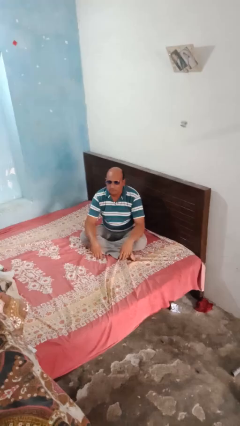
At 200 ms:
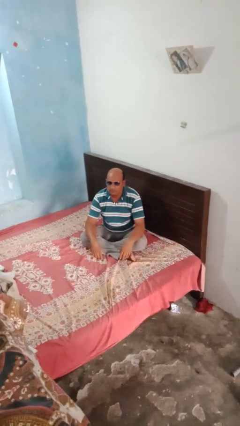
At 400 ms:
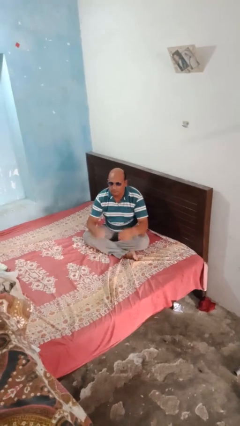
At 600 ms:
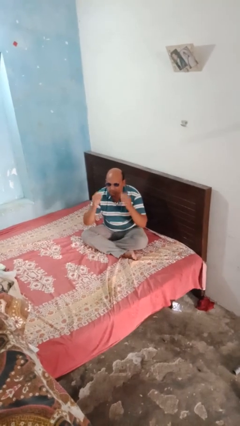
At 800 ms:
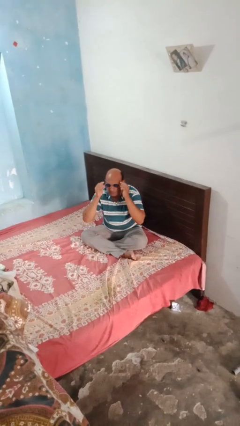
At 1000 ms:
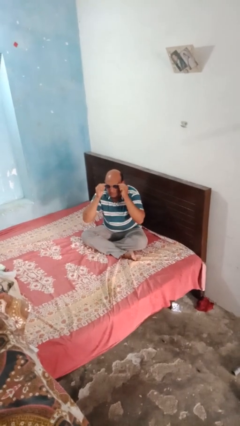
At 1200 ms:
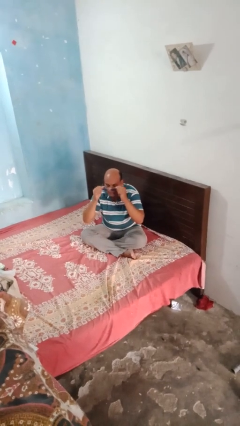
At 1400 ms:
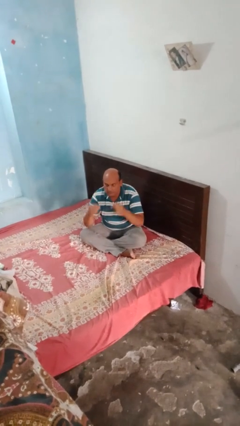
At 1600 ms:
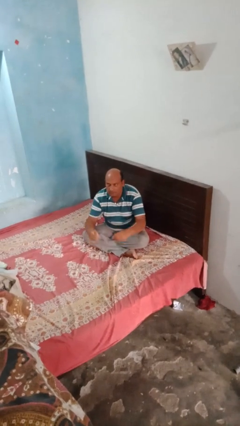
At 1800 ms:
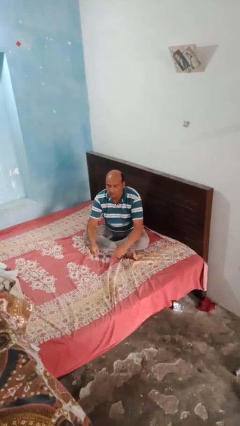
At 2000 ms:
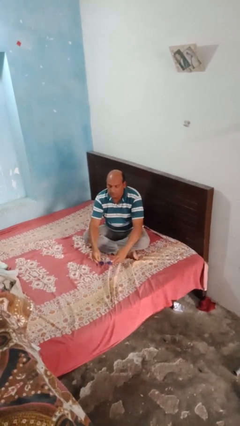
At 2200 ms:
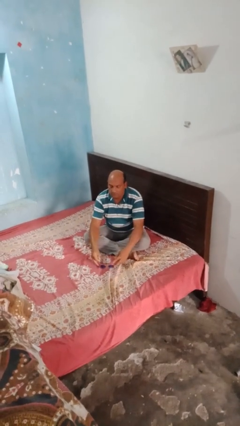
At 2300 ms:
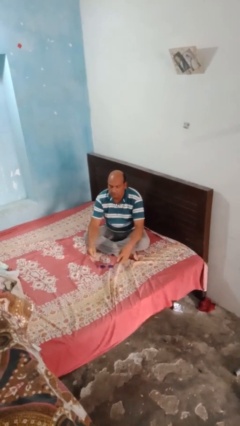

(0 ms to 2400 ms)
person takes off sunglasses

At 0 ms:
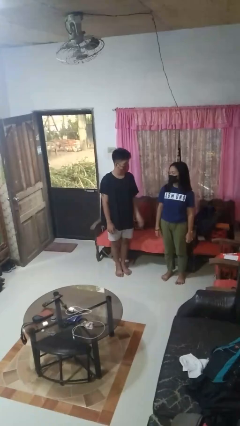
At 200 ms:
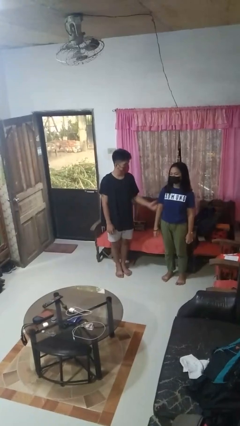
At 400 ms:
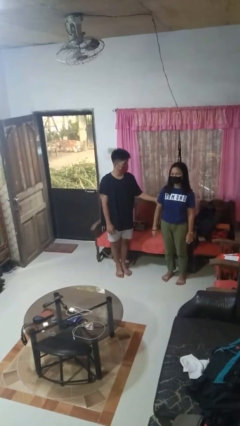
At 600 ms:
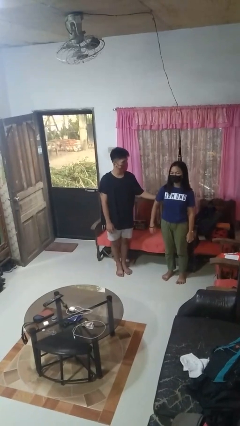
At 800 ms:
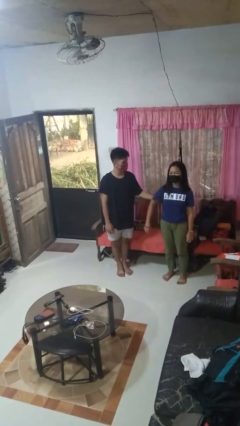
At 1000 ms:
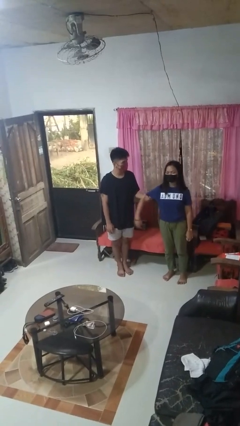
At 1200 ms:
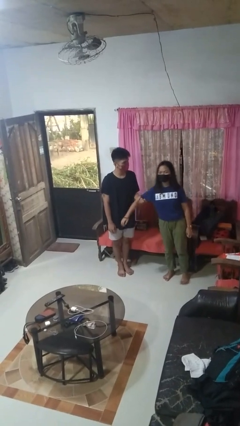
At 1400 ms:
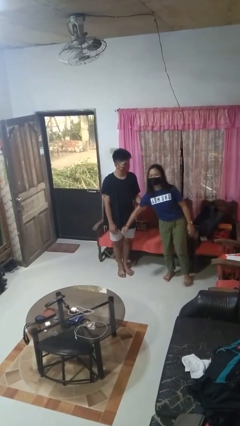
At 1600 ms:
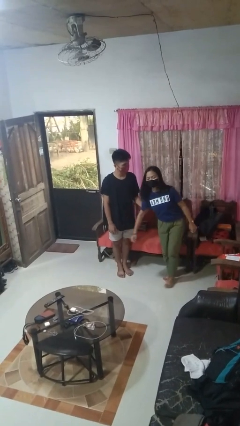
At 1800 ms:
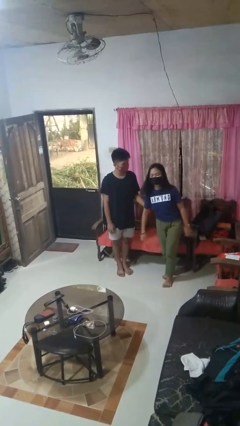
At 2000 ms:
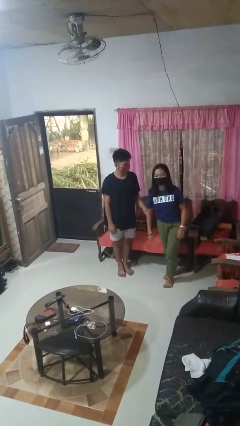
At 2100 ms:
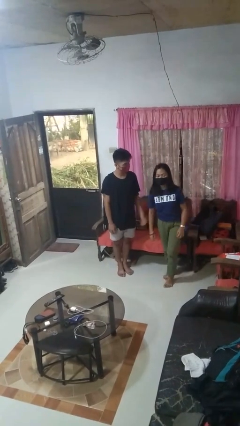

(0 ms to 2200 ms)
person grabs person by bicep

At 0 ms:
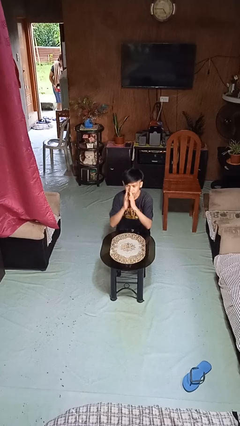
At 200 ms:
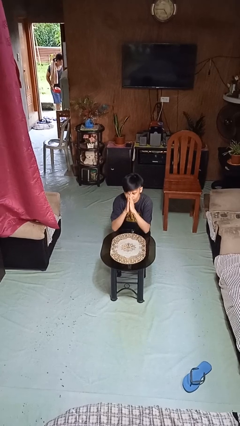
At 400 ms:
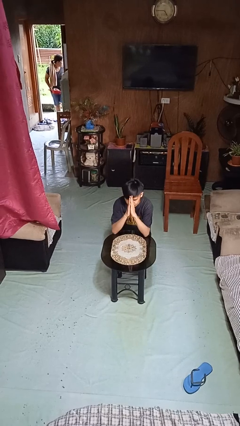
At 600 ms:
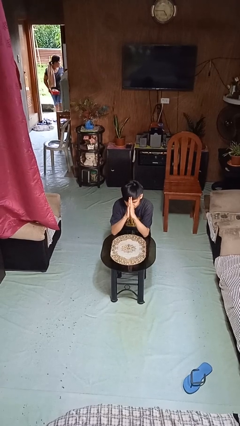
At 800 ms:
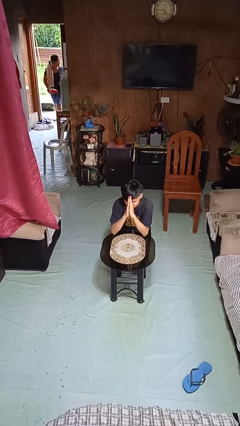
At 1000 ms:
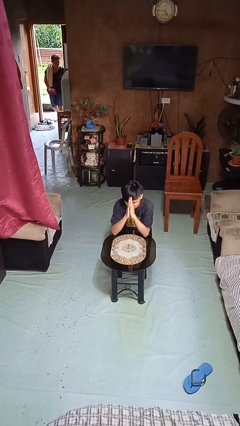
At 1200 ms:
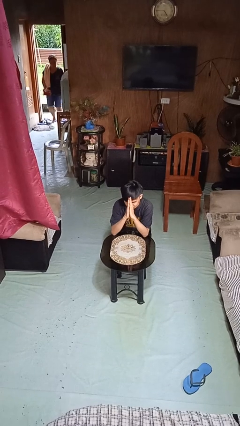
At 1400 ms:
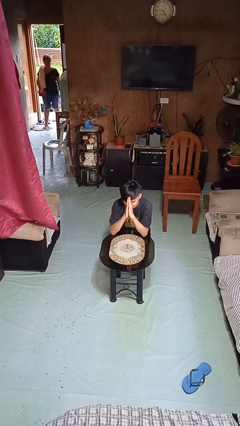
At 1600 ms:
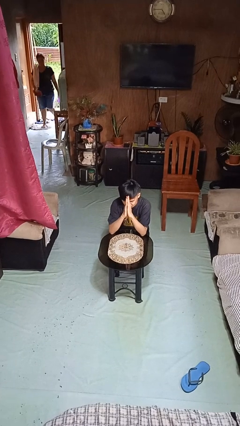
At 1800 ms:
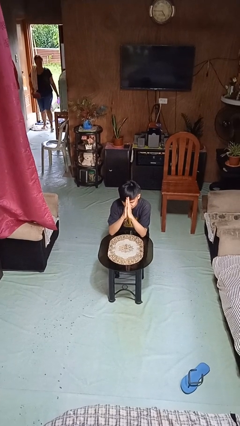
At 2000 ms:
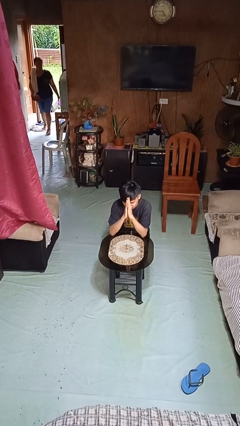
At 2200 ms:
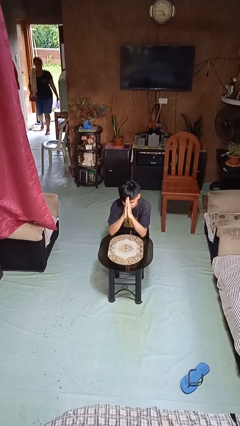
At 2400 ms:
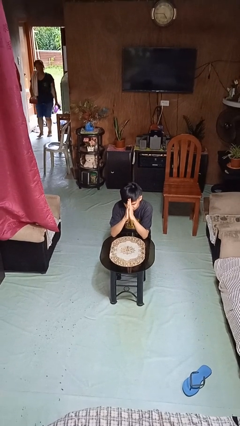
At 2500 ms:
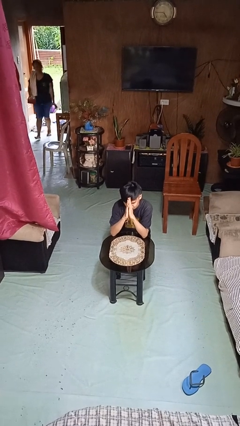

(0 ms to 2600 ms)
person prays

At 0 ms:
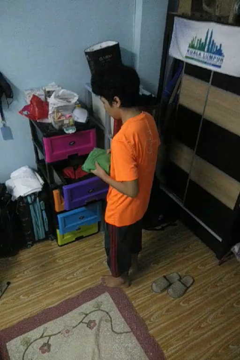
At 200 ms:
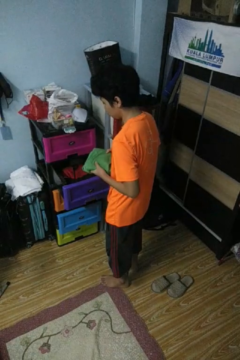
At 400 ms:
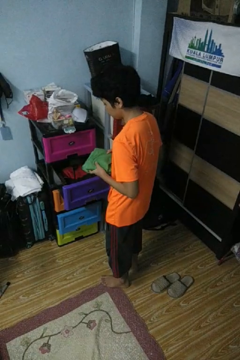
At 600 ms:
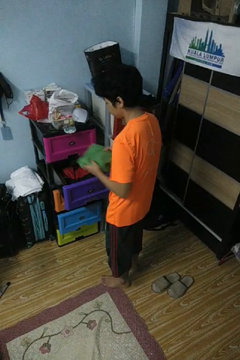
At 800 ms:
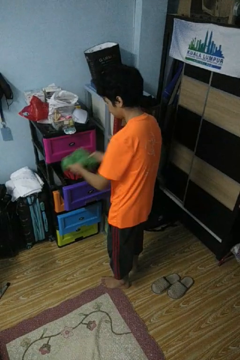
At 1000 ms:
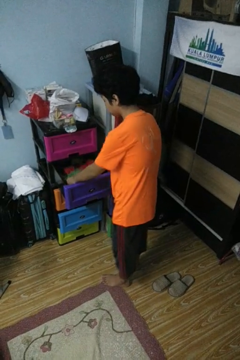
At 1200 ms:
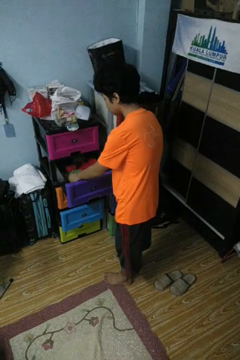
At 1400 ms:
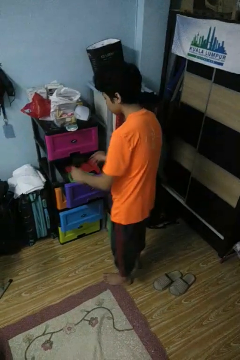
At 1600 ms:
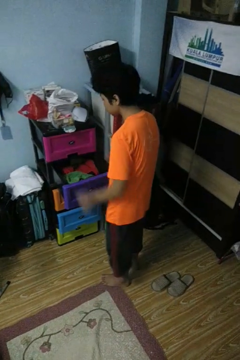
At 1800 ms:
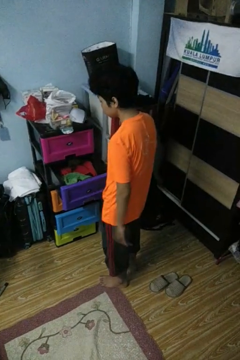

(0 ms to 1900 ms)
person puts clothes into dresser

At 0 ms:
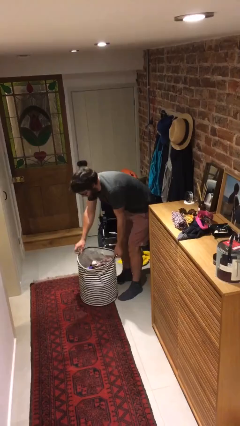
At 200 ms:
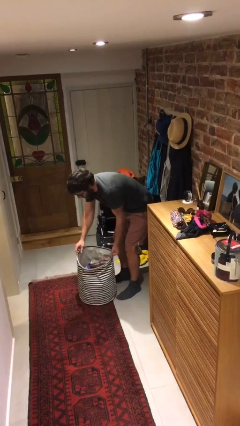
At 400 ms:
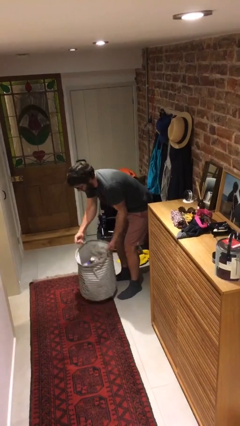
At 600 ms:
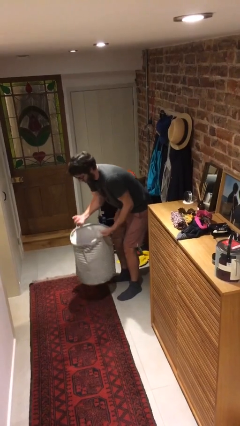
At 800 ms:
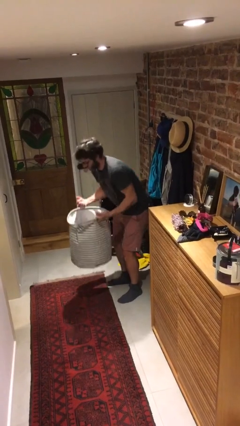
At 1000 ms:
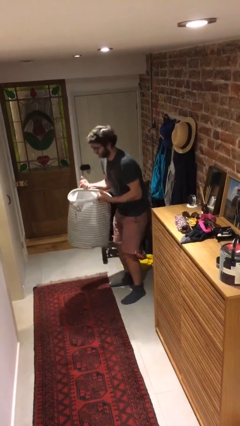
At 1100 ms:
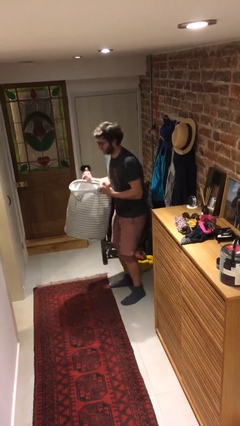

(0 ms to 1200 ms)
person picks up object from floor

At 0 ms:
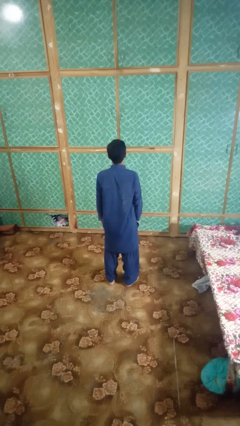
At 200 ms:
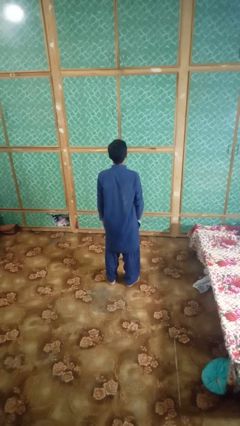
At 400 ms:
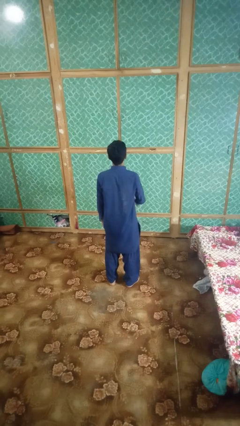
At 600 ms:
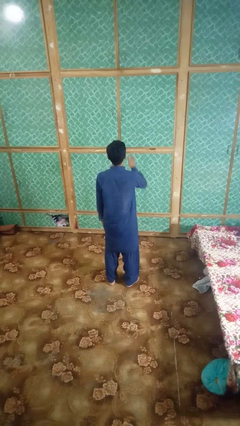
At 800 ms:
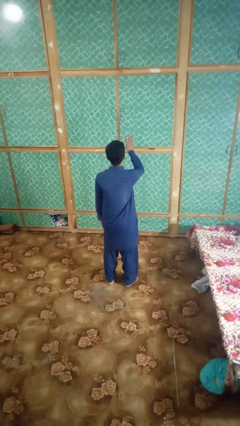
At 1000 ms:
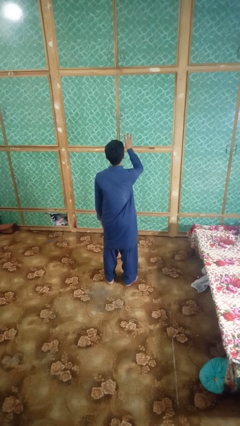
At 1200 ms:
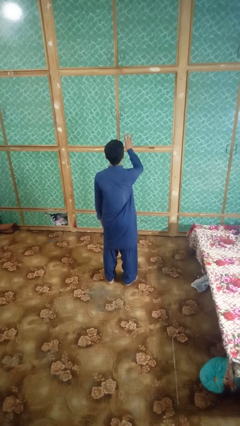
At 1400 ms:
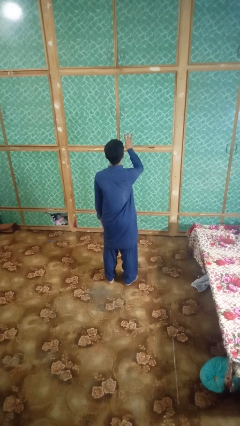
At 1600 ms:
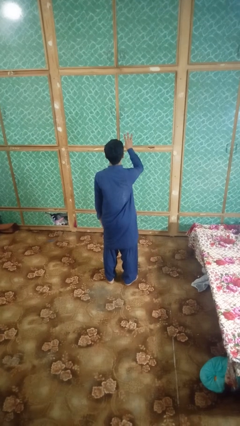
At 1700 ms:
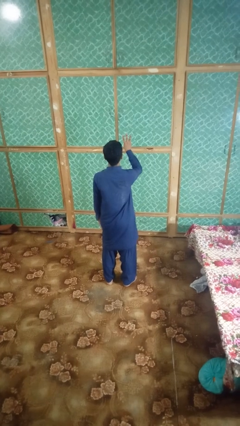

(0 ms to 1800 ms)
person gestures number three

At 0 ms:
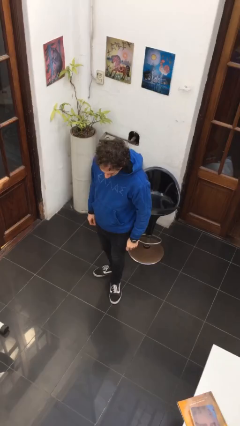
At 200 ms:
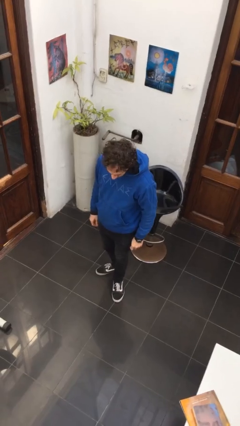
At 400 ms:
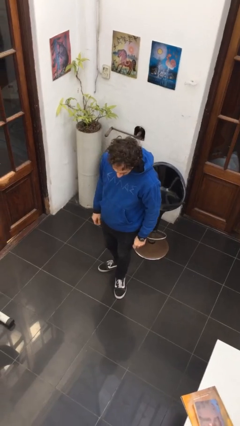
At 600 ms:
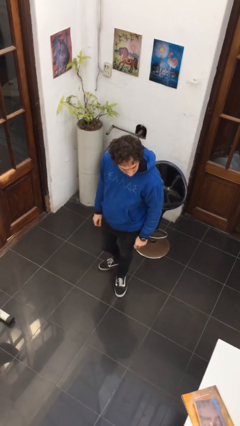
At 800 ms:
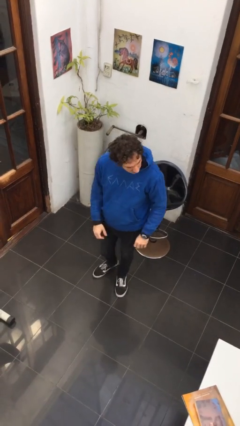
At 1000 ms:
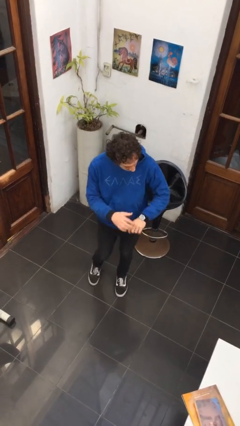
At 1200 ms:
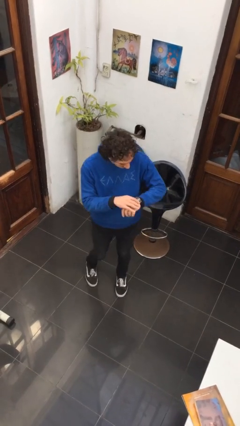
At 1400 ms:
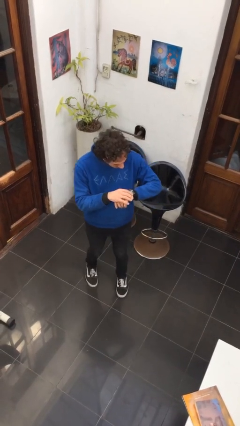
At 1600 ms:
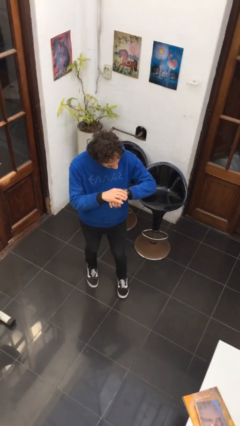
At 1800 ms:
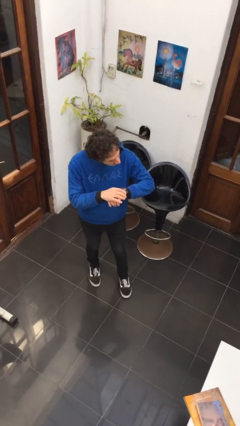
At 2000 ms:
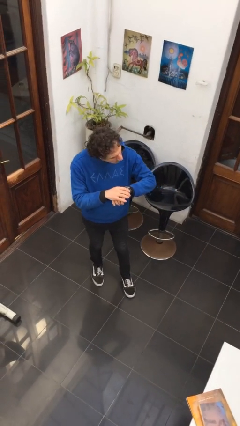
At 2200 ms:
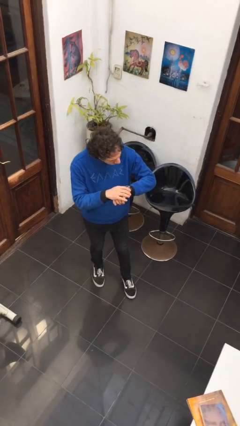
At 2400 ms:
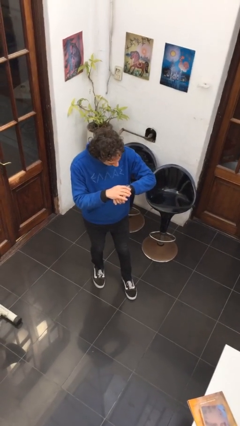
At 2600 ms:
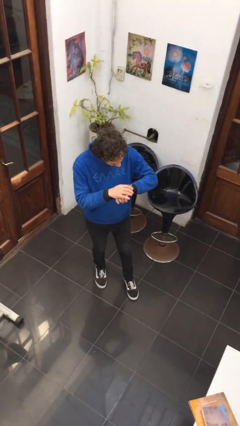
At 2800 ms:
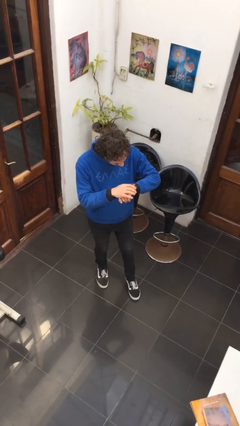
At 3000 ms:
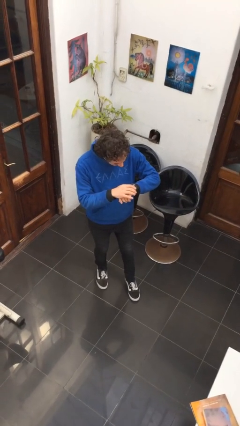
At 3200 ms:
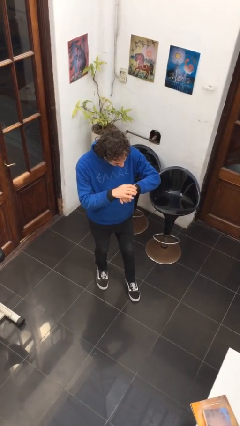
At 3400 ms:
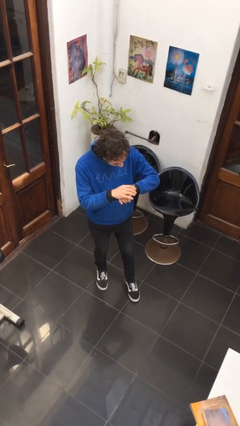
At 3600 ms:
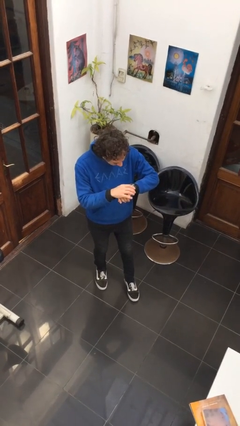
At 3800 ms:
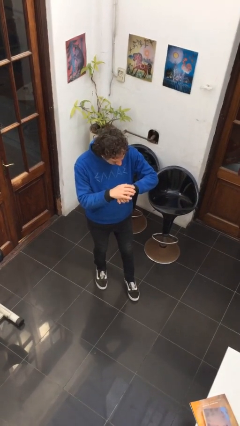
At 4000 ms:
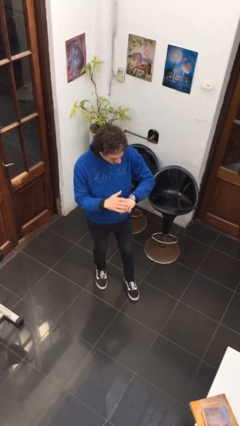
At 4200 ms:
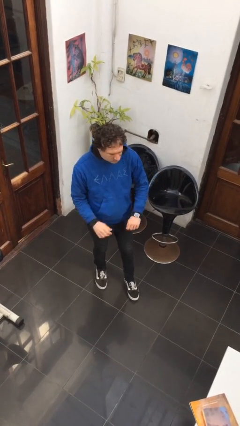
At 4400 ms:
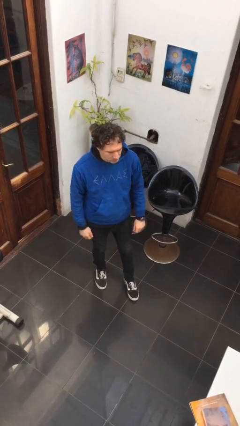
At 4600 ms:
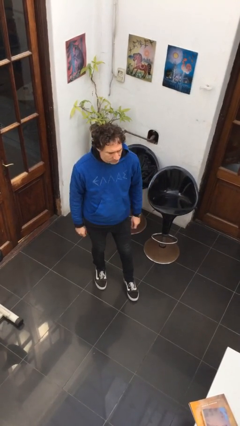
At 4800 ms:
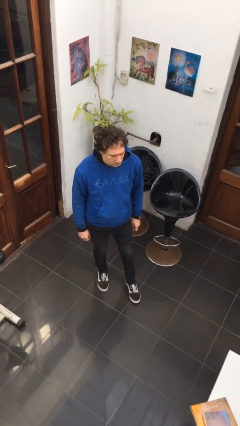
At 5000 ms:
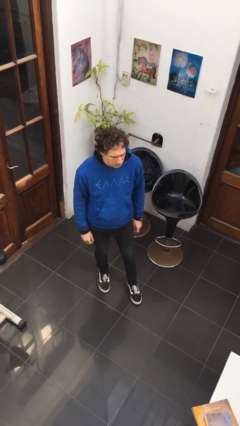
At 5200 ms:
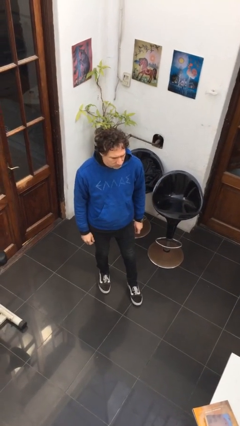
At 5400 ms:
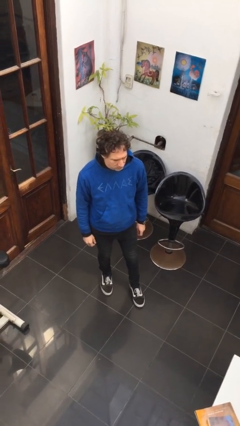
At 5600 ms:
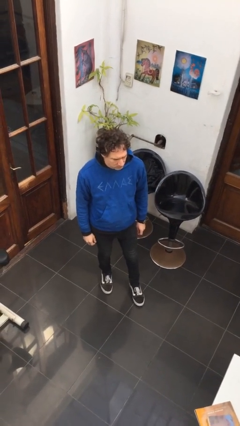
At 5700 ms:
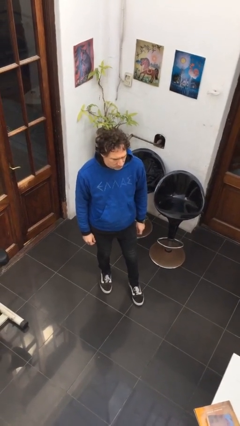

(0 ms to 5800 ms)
person looks at wristwatch
